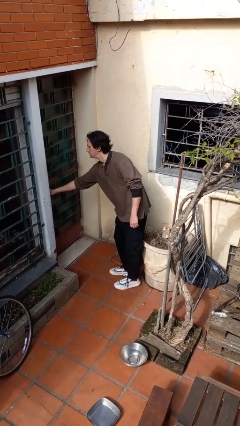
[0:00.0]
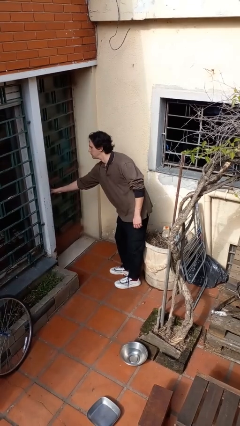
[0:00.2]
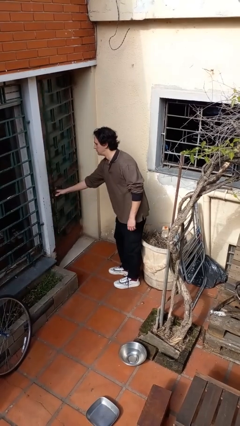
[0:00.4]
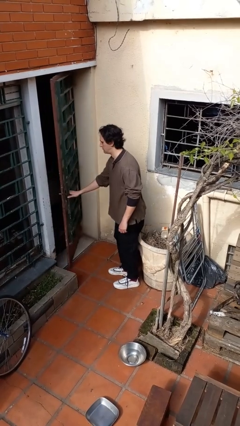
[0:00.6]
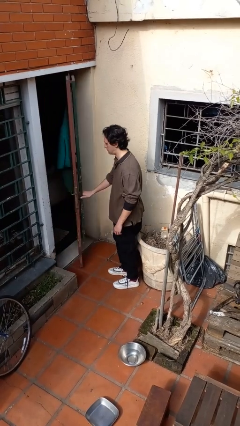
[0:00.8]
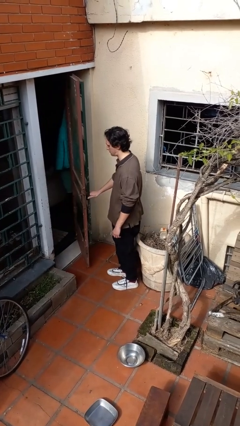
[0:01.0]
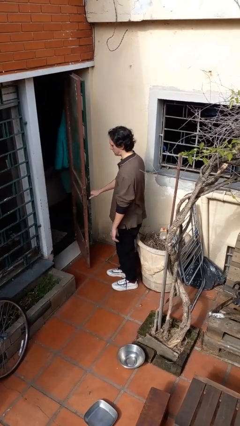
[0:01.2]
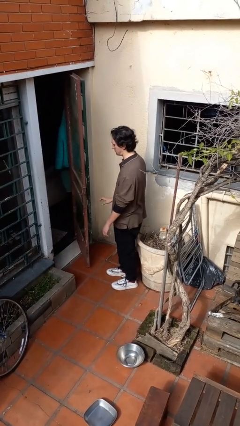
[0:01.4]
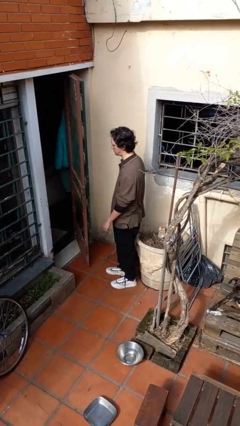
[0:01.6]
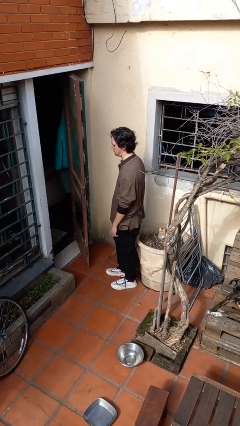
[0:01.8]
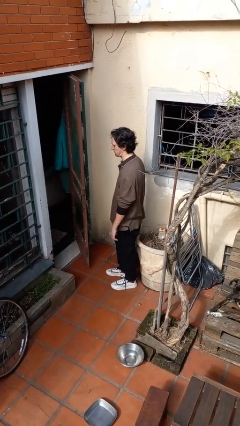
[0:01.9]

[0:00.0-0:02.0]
person opens facility door

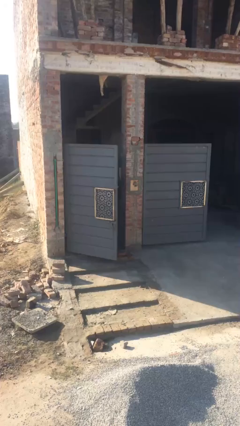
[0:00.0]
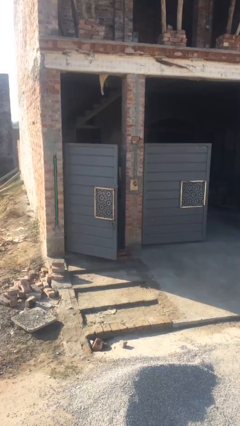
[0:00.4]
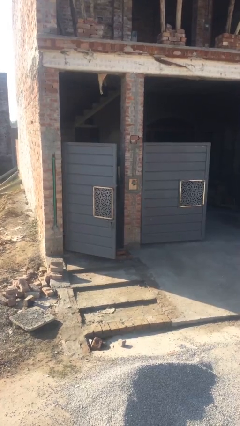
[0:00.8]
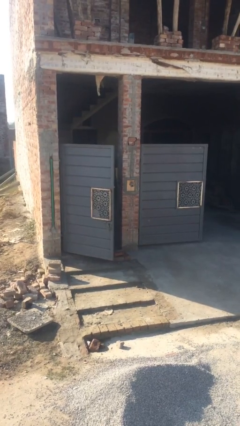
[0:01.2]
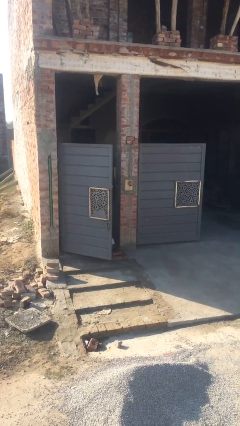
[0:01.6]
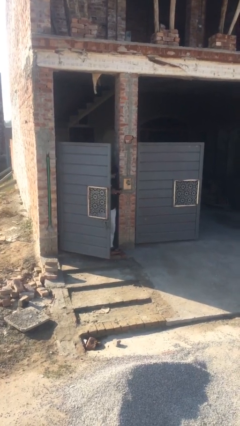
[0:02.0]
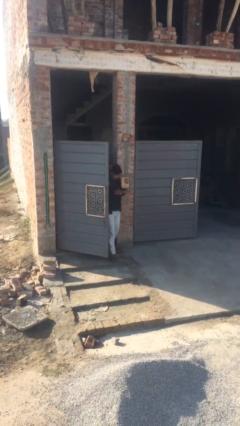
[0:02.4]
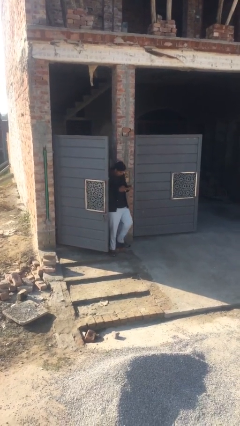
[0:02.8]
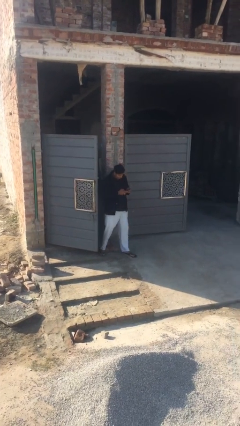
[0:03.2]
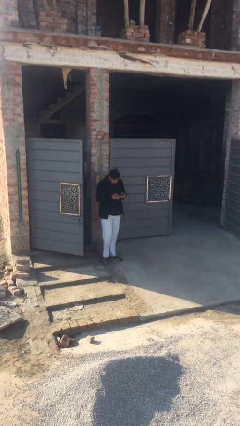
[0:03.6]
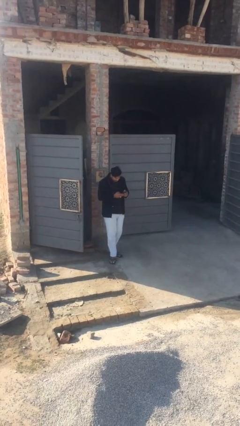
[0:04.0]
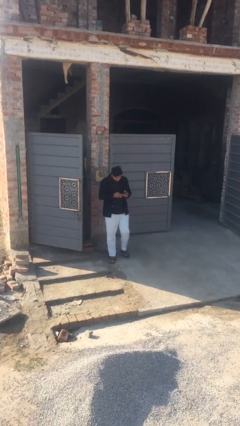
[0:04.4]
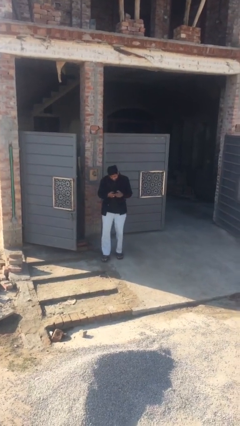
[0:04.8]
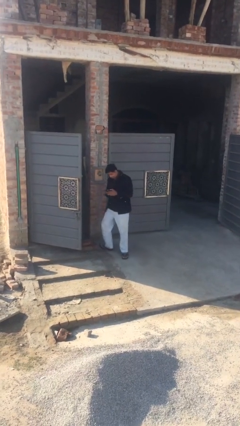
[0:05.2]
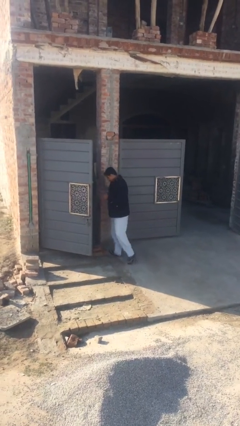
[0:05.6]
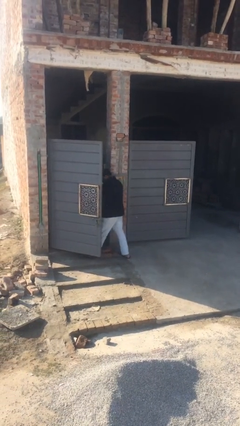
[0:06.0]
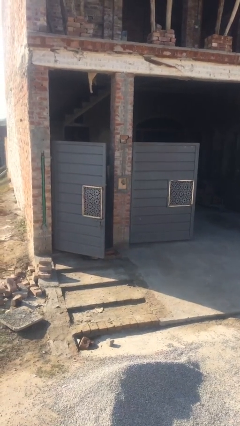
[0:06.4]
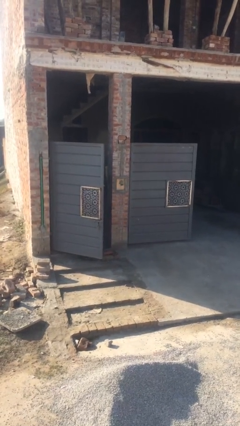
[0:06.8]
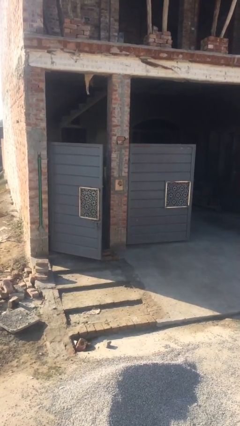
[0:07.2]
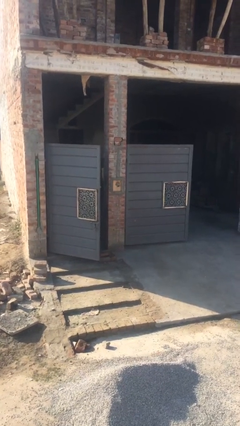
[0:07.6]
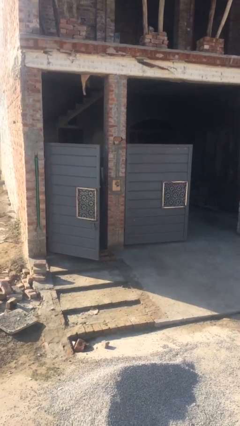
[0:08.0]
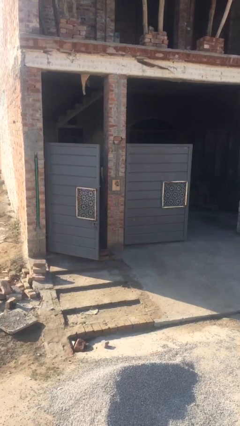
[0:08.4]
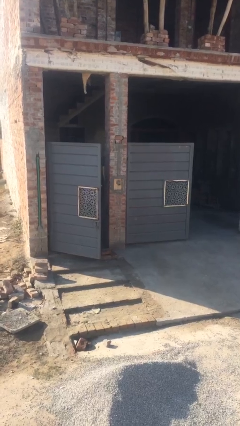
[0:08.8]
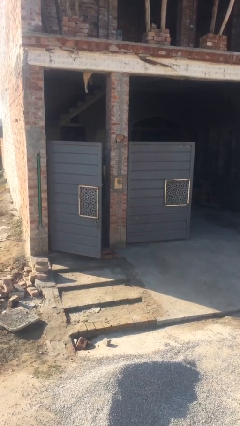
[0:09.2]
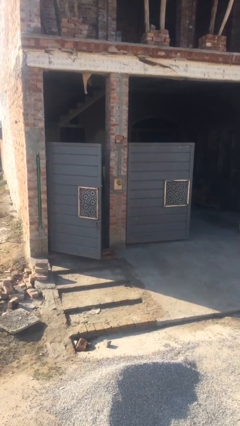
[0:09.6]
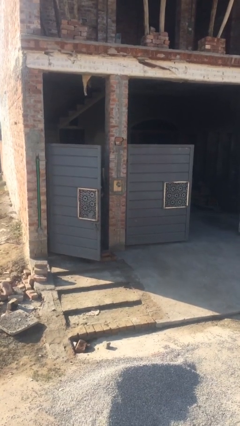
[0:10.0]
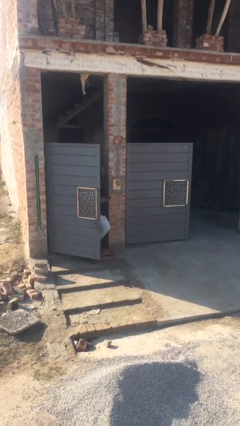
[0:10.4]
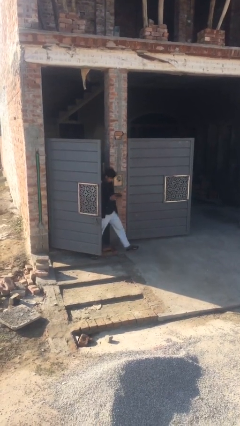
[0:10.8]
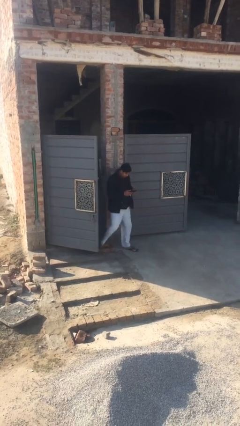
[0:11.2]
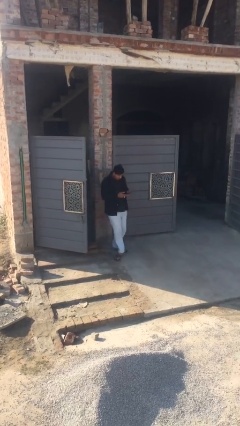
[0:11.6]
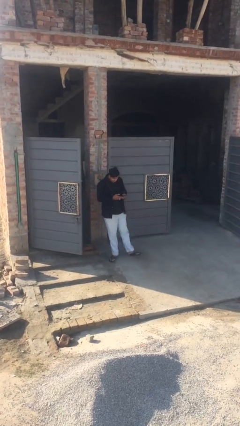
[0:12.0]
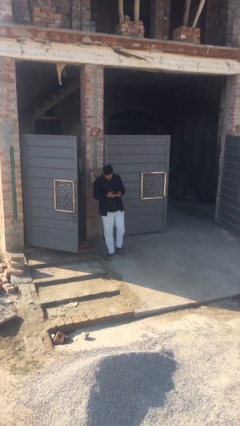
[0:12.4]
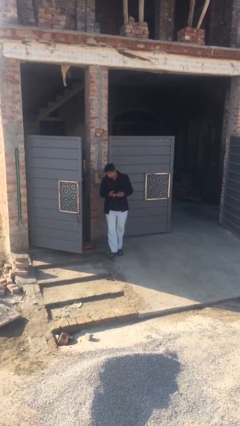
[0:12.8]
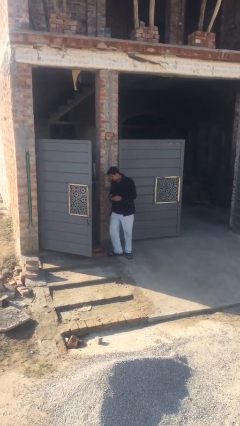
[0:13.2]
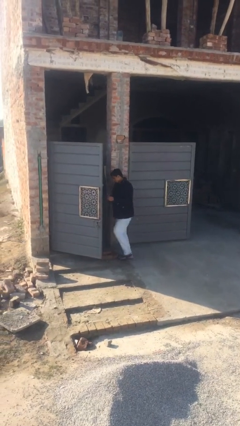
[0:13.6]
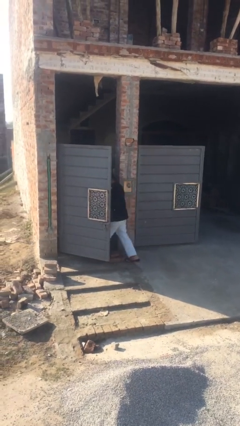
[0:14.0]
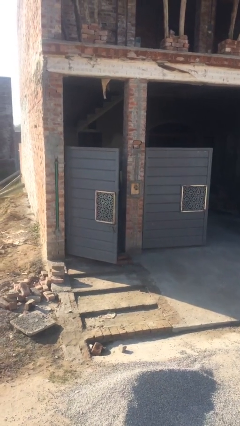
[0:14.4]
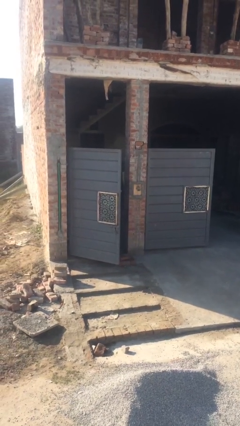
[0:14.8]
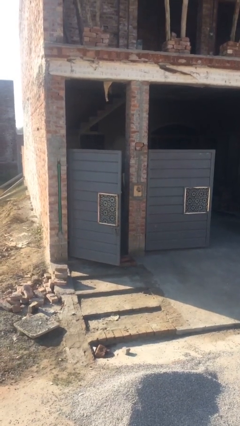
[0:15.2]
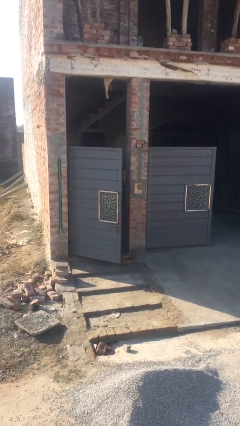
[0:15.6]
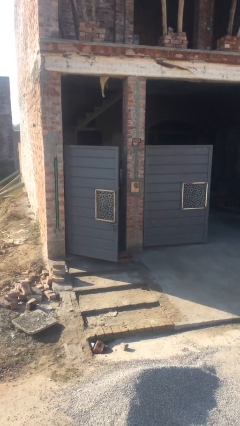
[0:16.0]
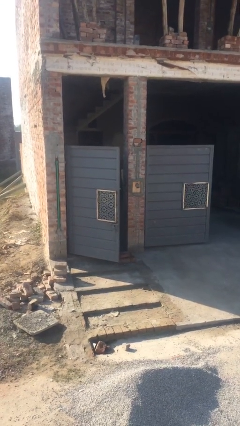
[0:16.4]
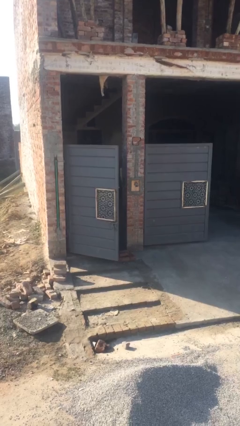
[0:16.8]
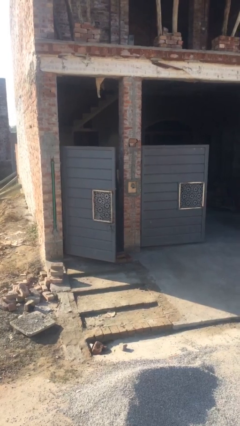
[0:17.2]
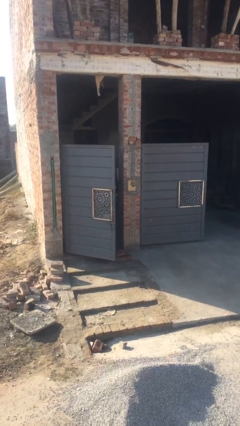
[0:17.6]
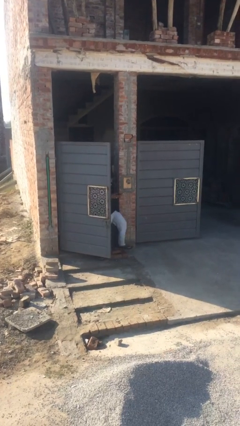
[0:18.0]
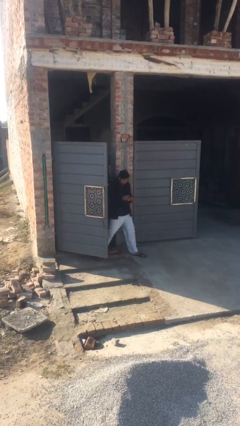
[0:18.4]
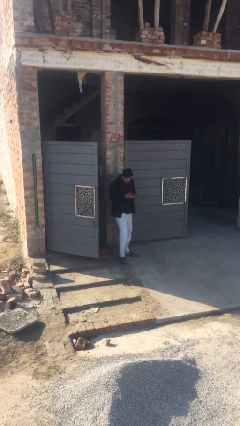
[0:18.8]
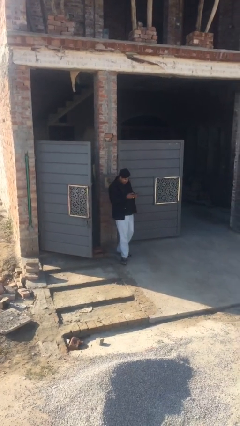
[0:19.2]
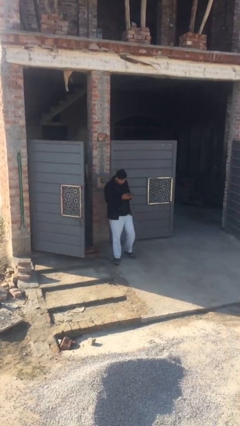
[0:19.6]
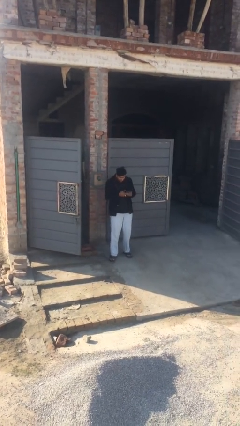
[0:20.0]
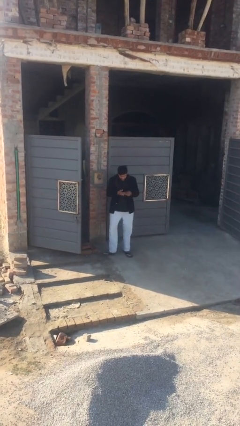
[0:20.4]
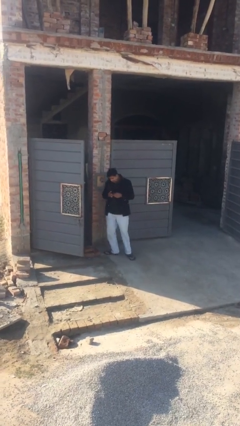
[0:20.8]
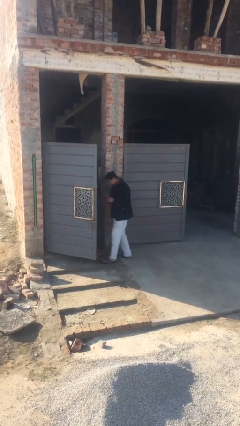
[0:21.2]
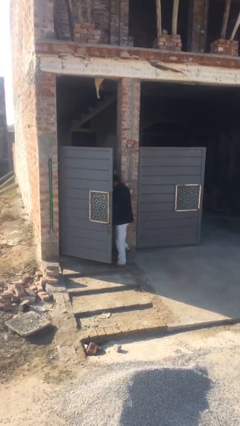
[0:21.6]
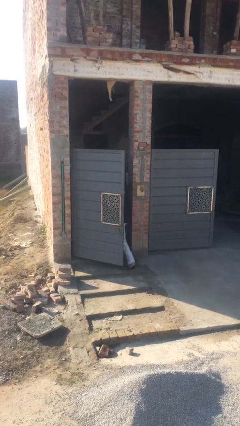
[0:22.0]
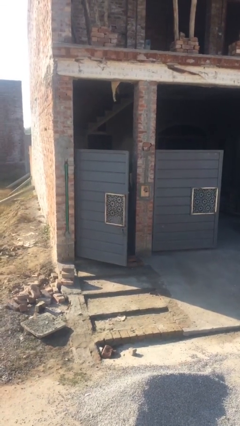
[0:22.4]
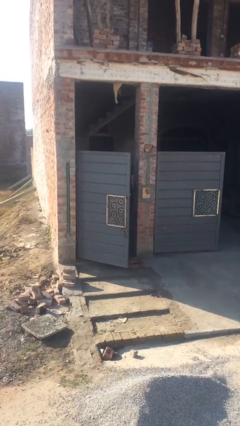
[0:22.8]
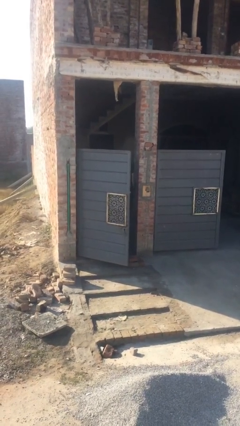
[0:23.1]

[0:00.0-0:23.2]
person texts on phone

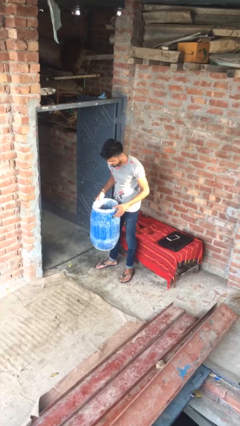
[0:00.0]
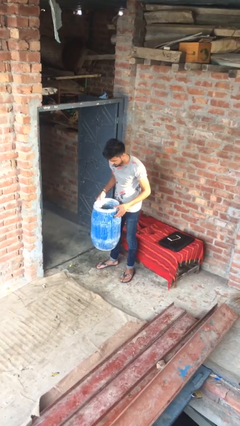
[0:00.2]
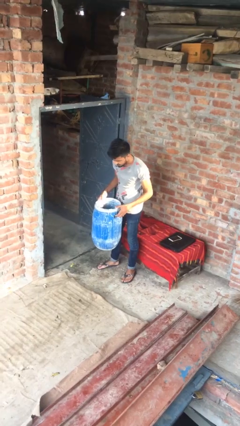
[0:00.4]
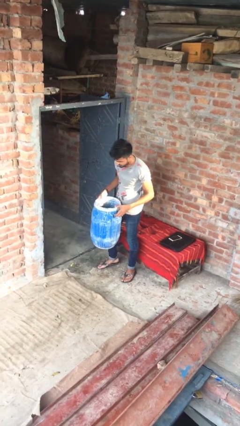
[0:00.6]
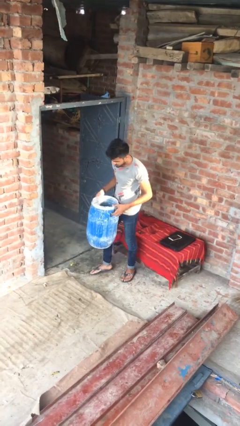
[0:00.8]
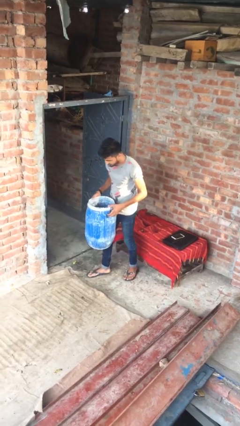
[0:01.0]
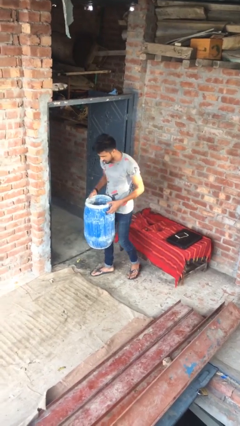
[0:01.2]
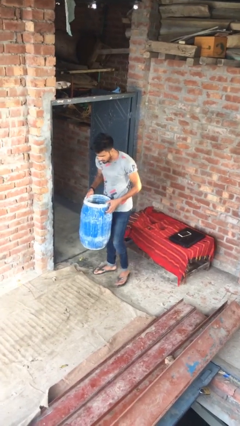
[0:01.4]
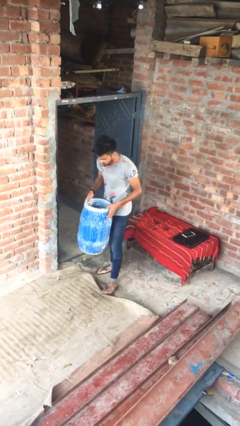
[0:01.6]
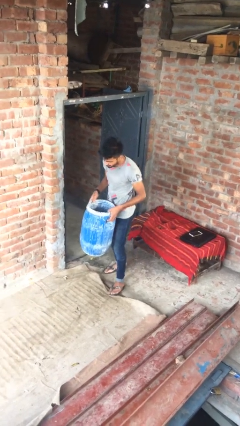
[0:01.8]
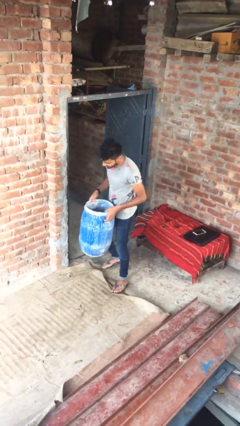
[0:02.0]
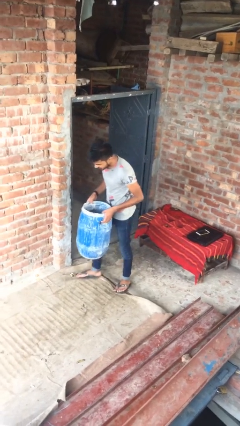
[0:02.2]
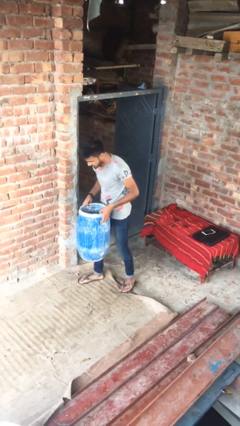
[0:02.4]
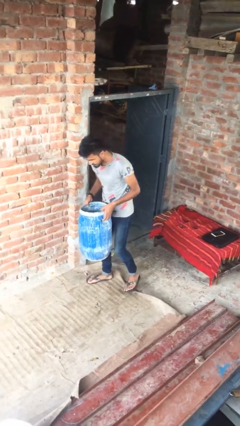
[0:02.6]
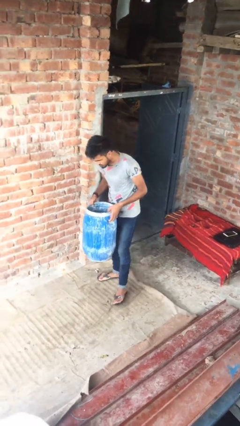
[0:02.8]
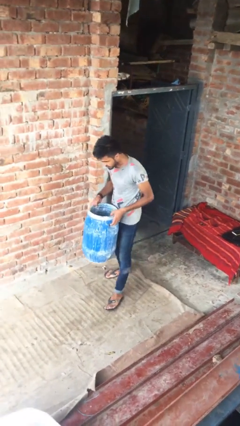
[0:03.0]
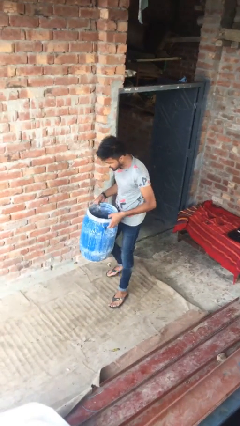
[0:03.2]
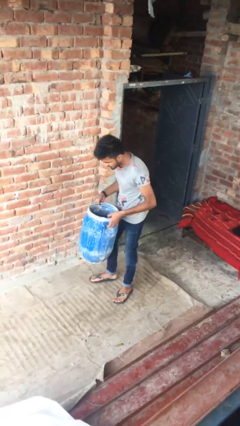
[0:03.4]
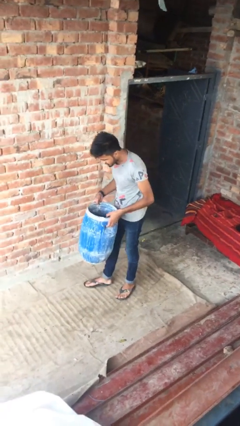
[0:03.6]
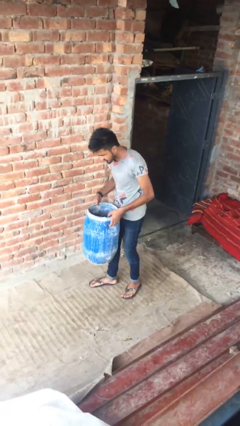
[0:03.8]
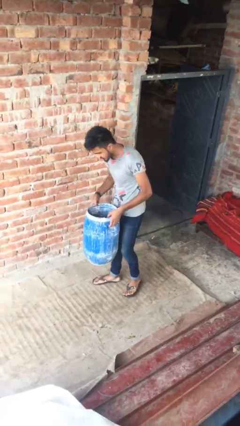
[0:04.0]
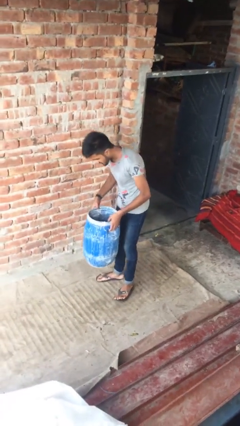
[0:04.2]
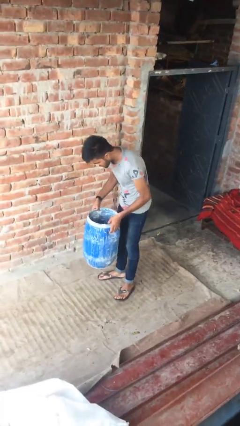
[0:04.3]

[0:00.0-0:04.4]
person carries heavy object
